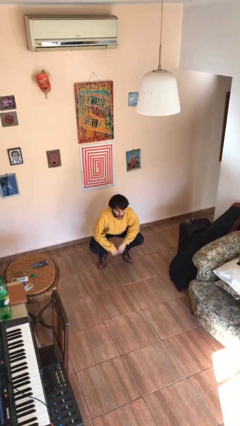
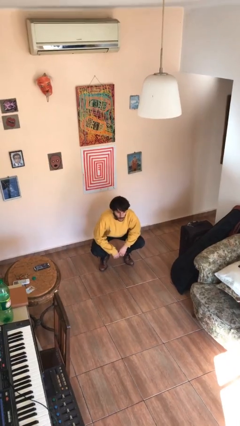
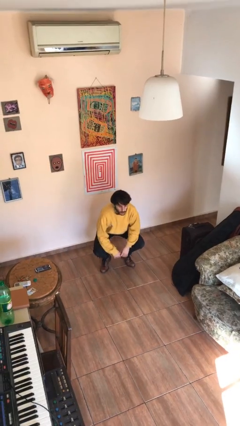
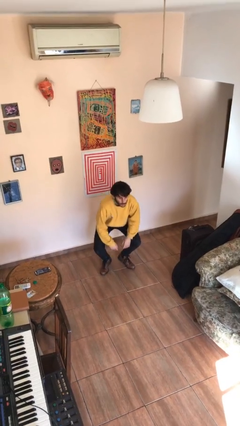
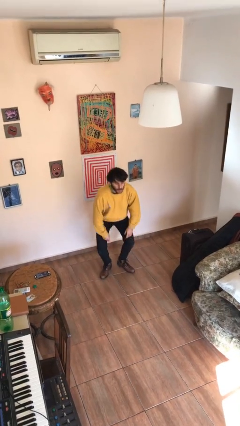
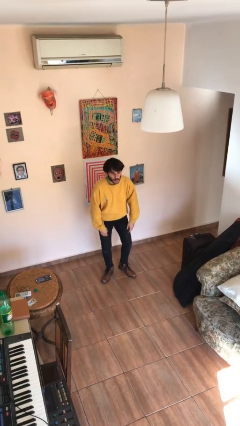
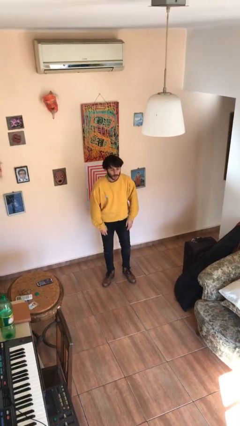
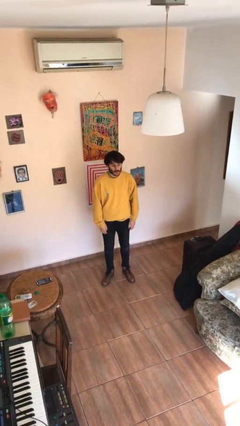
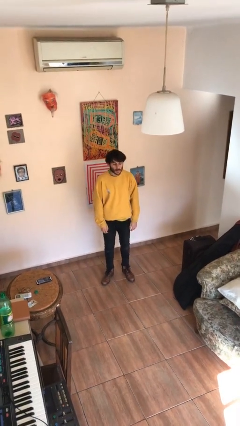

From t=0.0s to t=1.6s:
person stands up

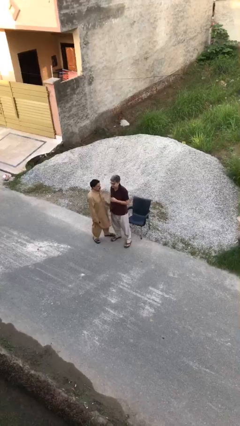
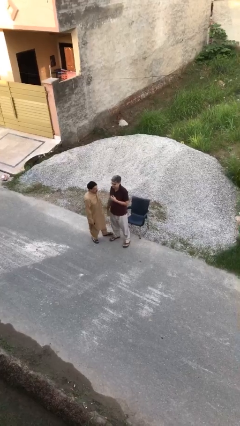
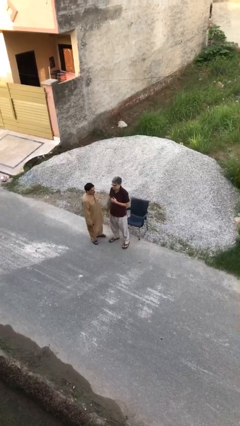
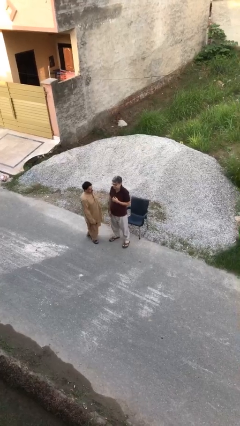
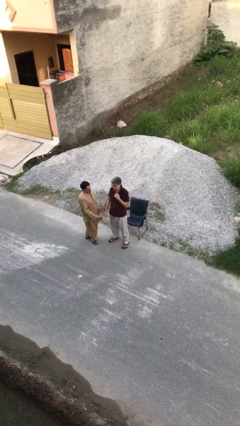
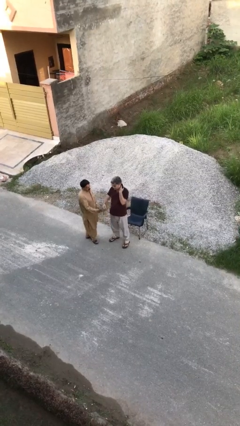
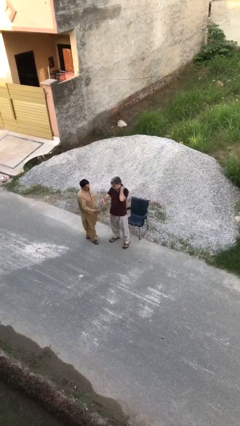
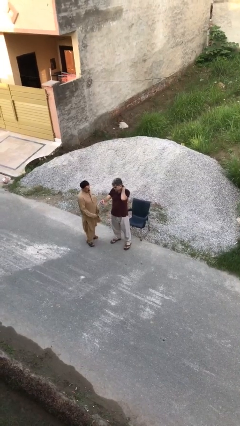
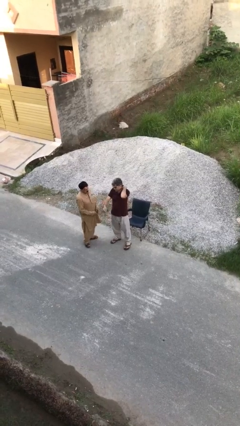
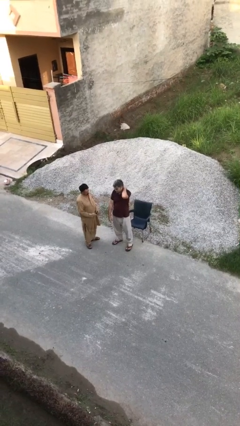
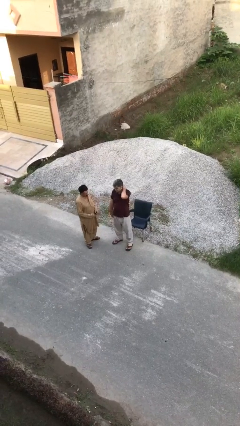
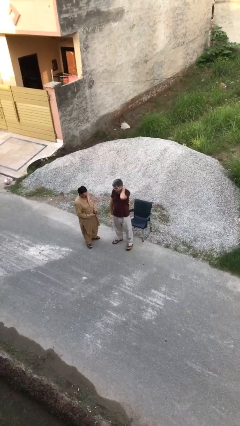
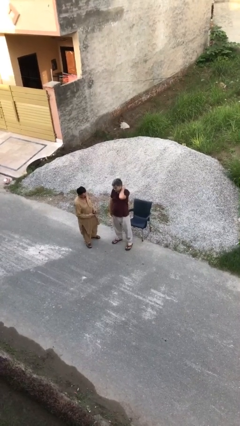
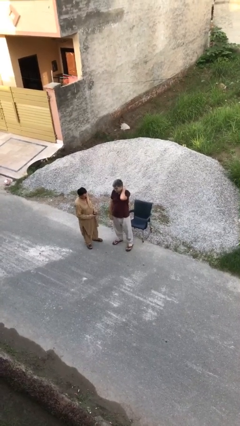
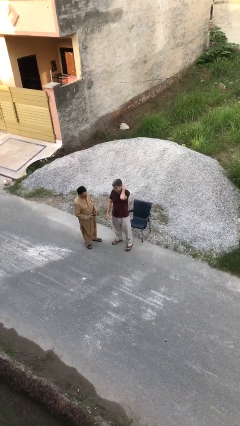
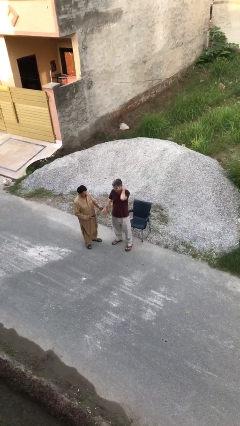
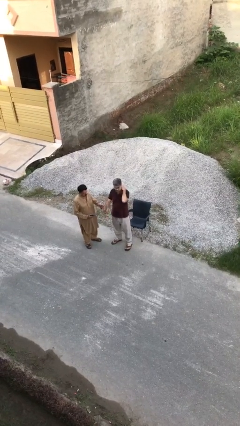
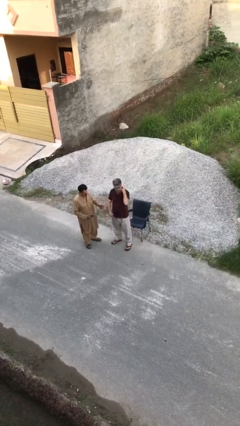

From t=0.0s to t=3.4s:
person talks to person

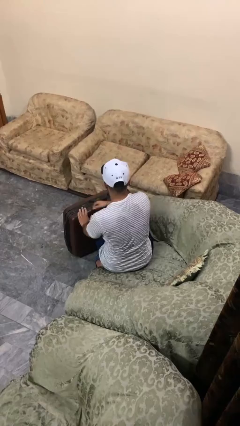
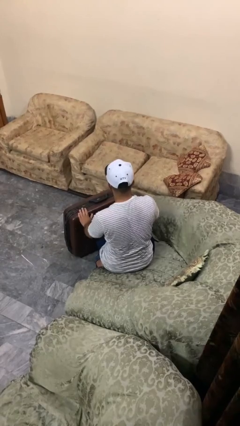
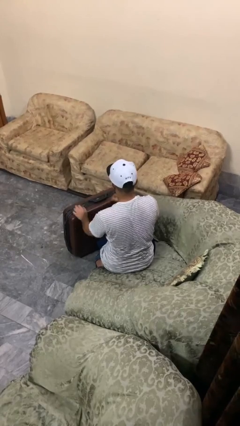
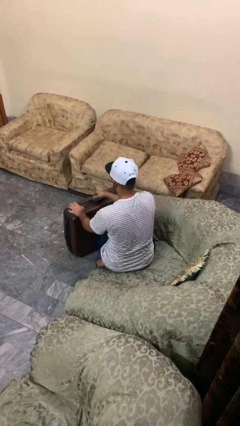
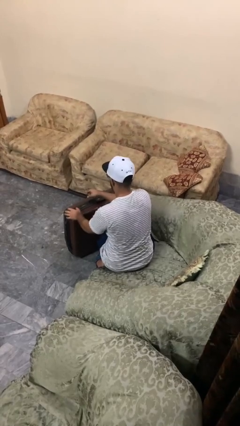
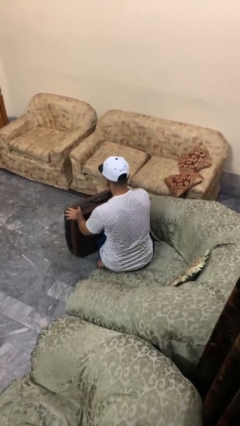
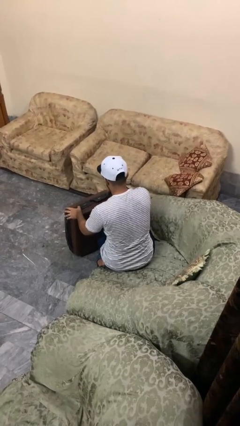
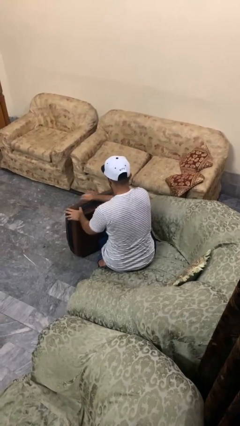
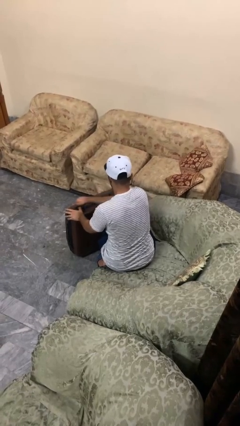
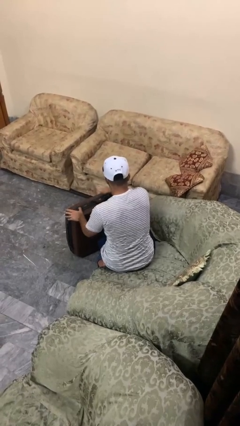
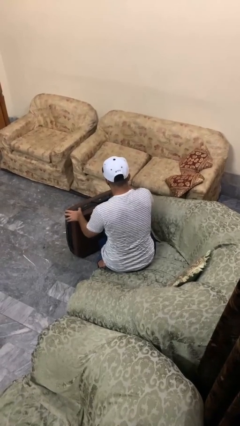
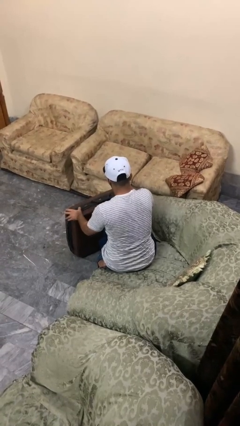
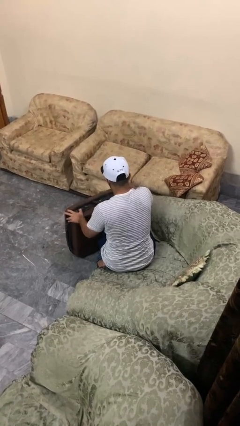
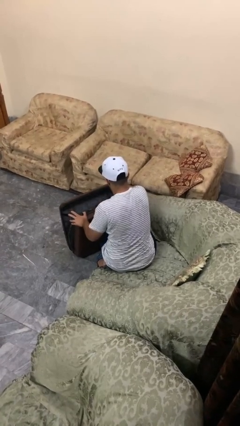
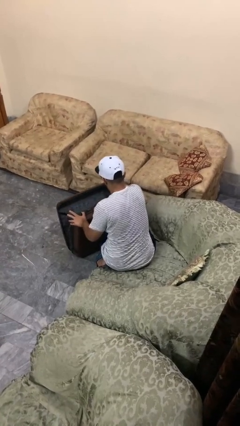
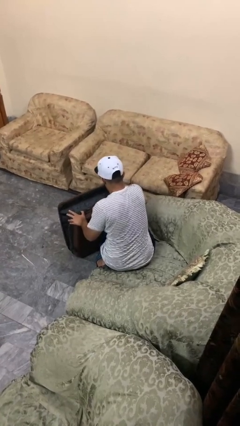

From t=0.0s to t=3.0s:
person opens suitcase

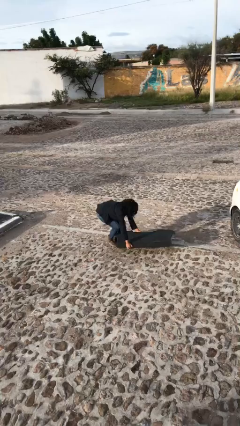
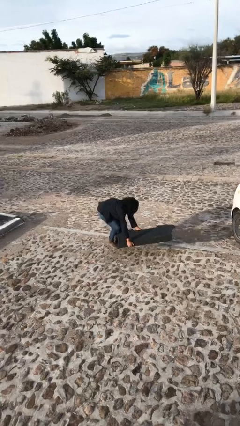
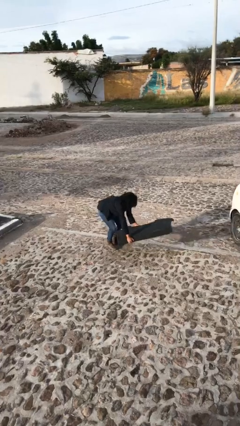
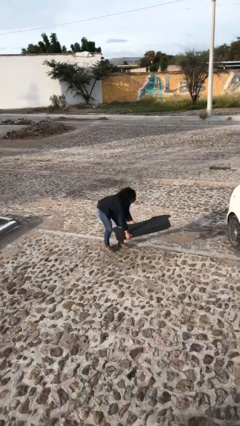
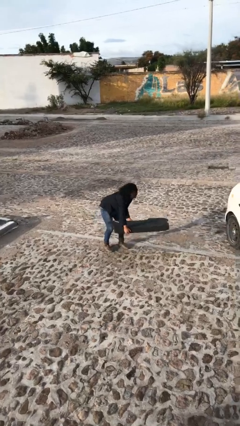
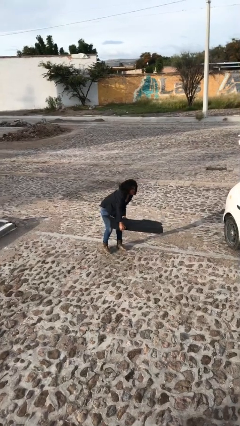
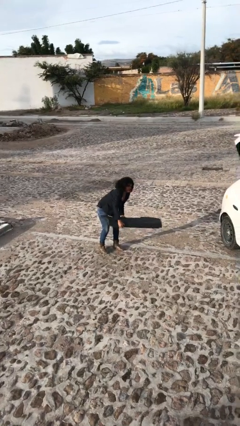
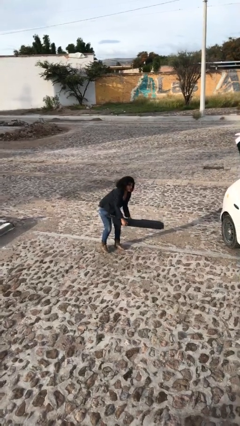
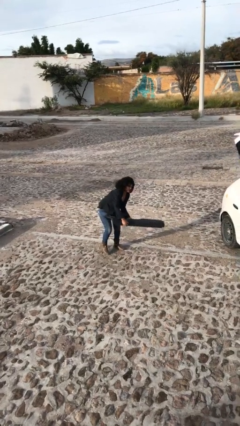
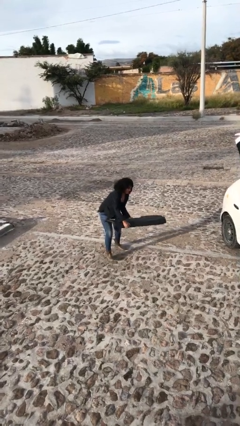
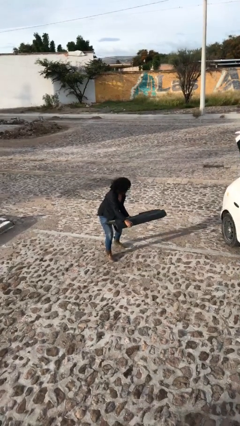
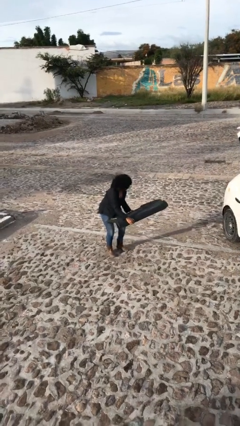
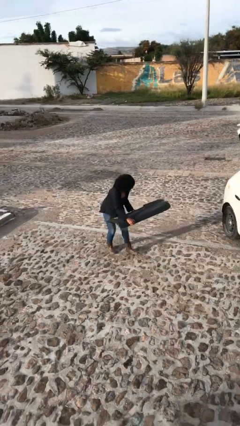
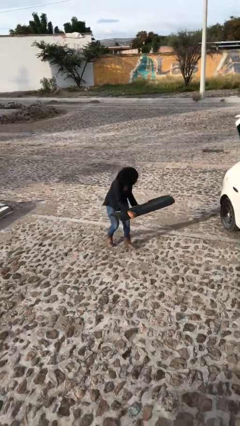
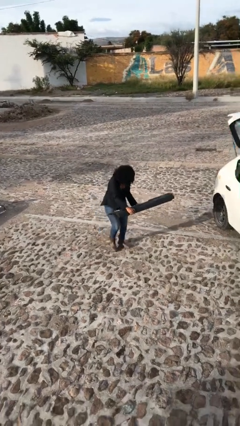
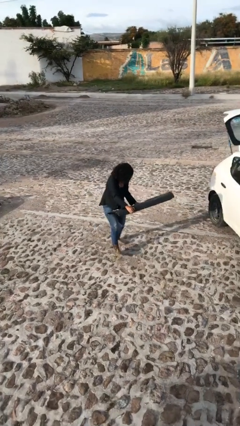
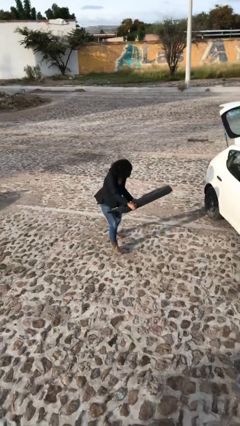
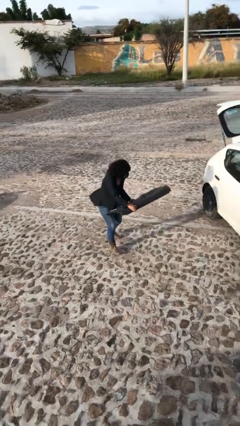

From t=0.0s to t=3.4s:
person carries heavy object

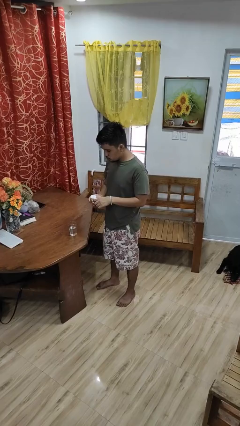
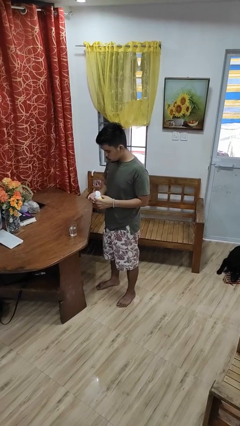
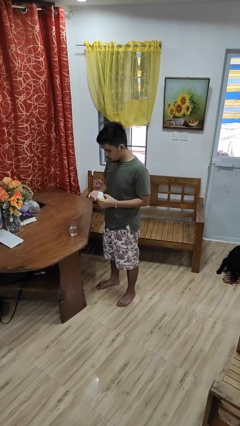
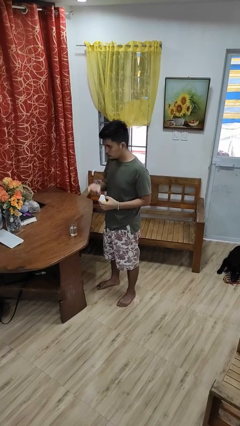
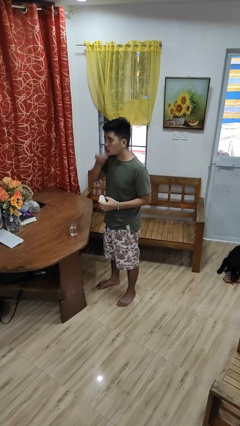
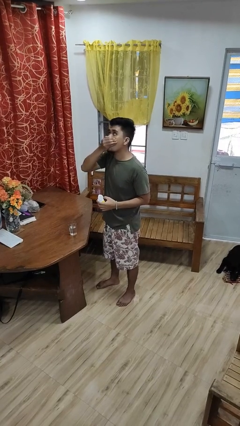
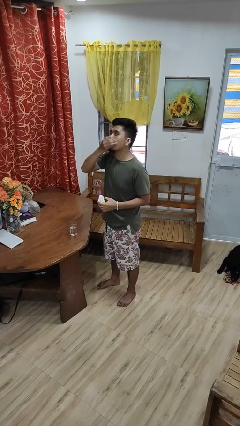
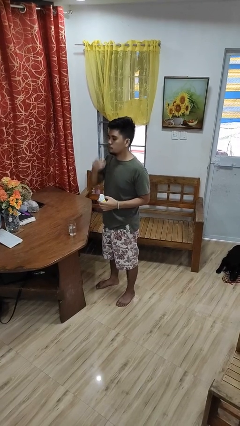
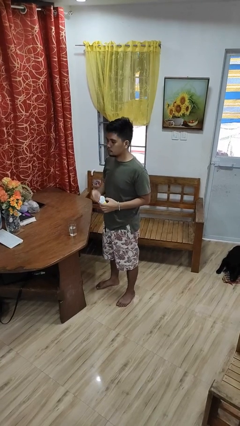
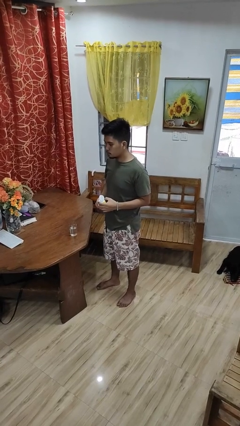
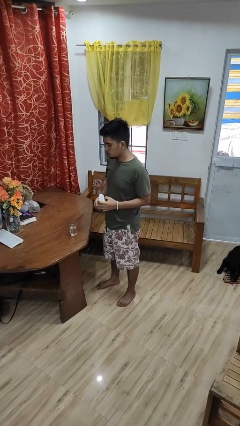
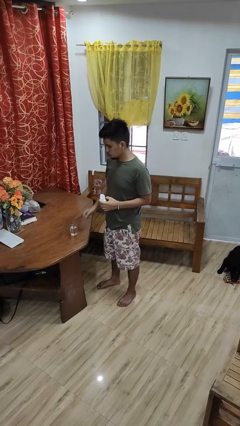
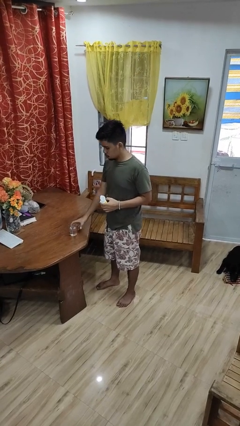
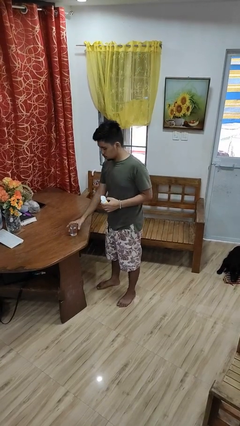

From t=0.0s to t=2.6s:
person takes medicine pills

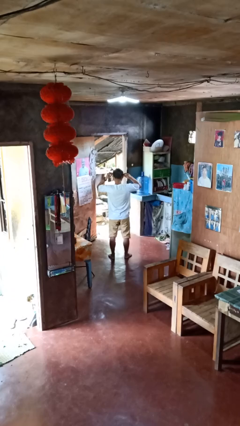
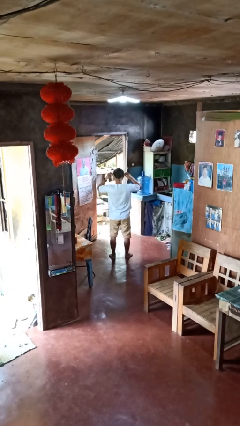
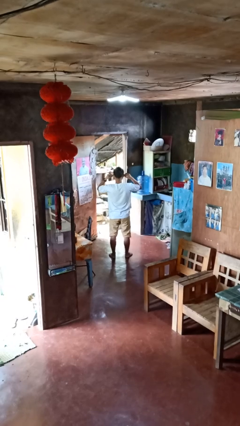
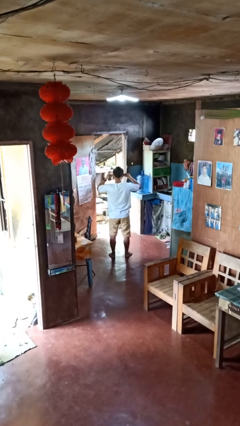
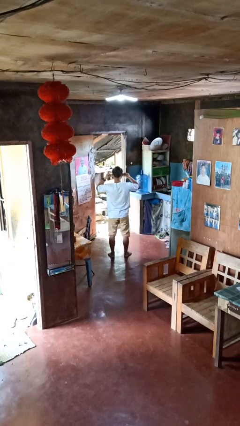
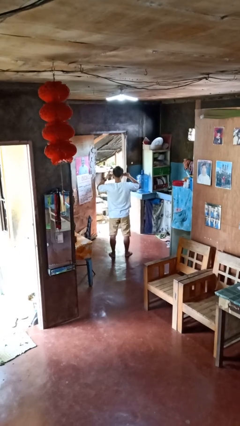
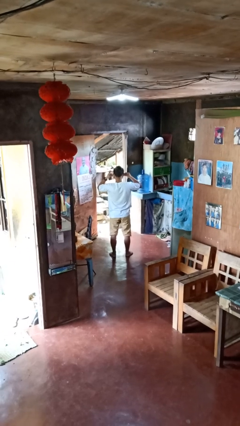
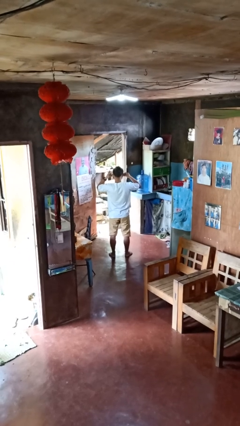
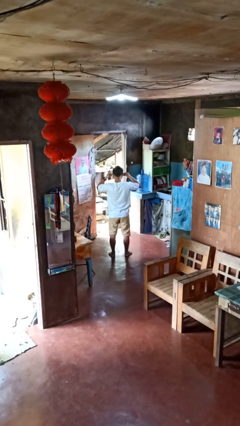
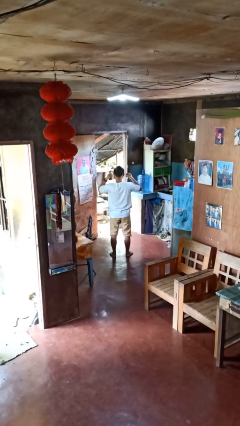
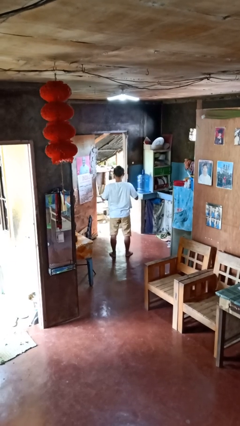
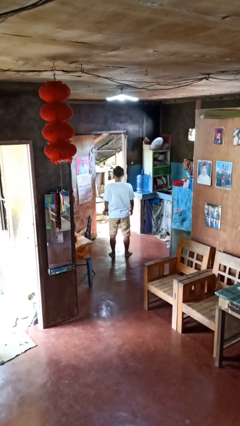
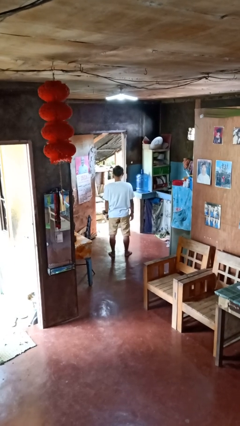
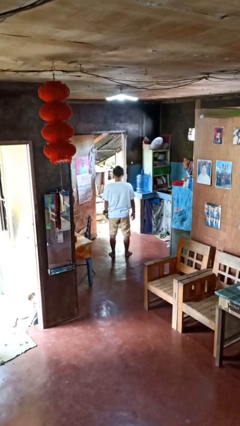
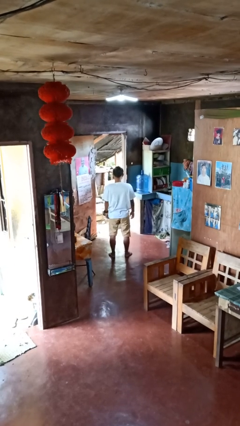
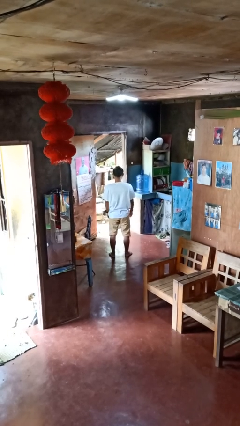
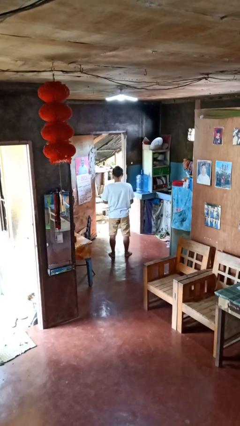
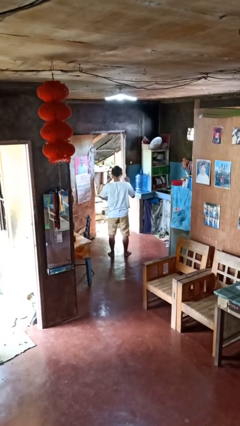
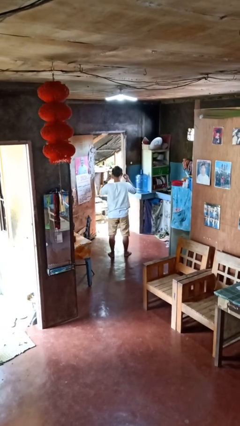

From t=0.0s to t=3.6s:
person puts on headphones
